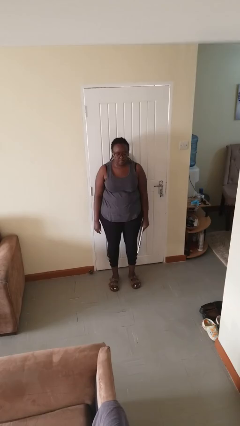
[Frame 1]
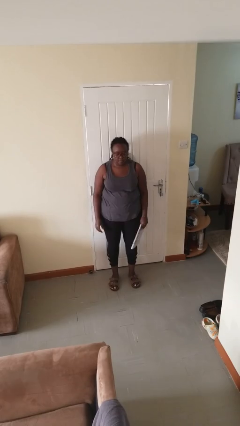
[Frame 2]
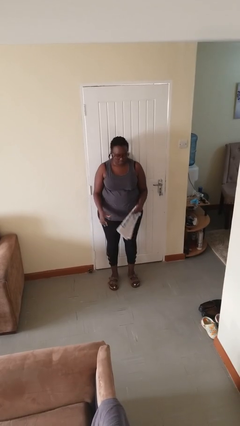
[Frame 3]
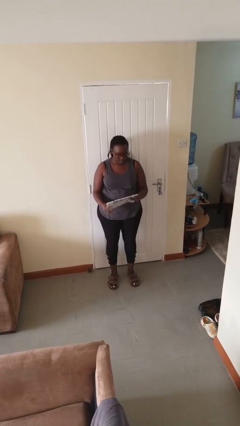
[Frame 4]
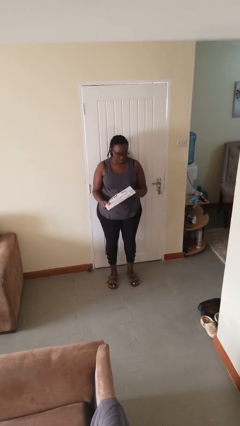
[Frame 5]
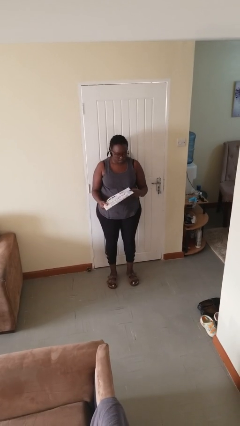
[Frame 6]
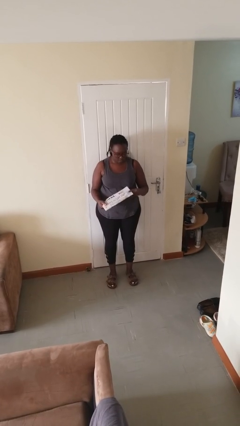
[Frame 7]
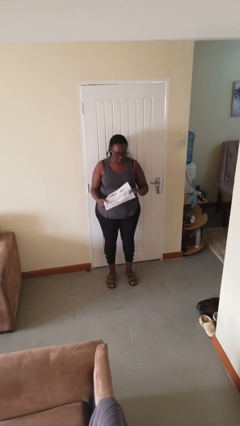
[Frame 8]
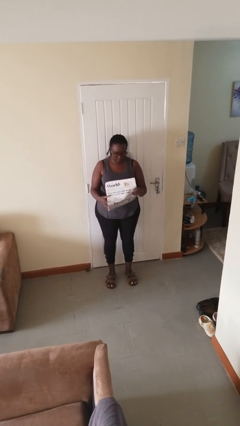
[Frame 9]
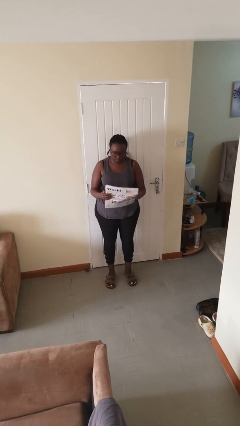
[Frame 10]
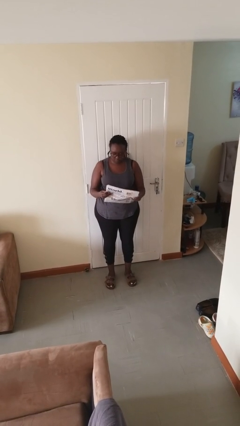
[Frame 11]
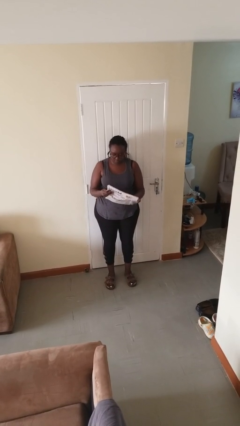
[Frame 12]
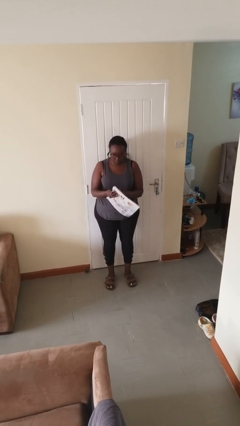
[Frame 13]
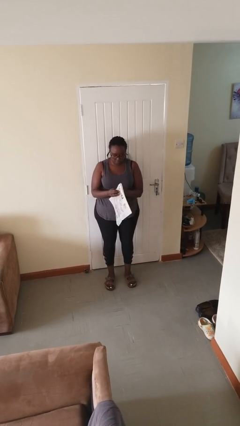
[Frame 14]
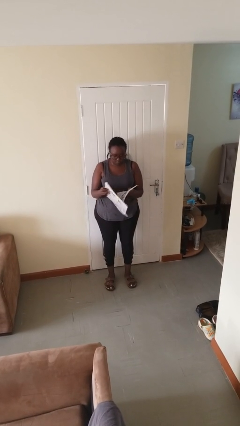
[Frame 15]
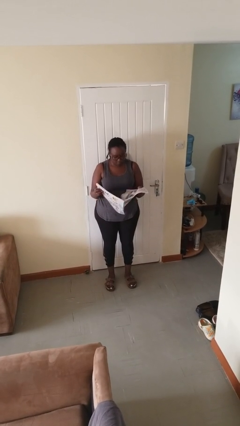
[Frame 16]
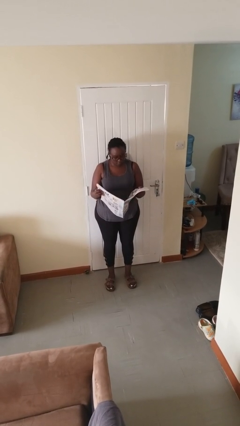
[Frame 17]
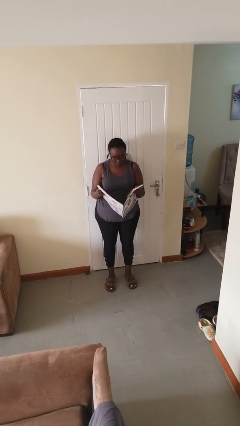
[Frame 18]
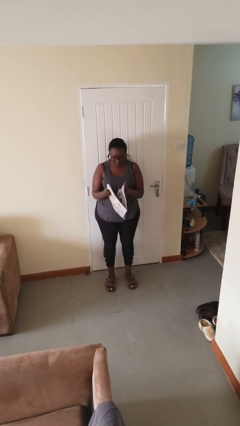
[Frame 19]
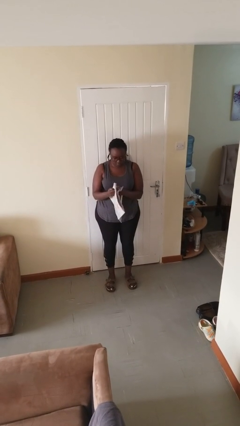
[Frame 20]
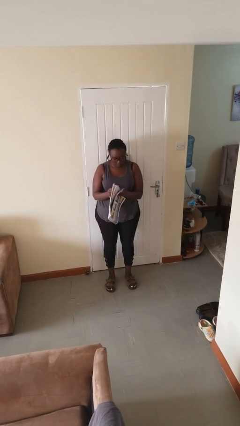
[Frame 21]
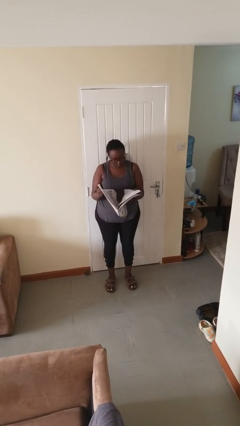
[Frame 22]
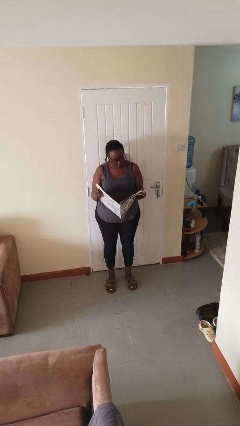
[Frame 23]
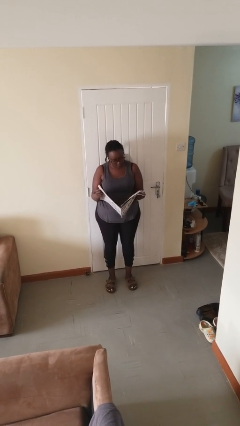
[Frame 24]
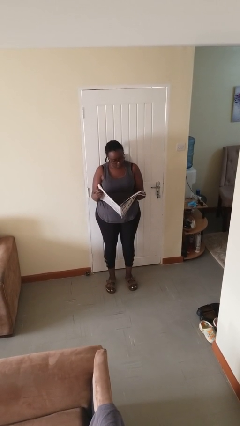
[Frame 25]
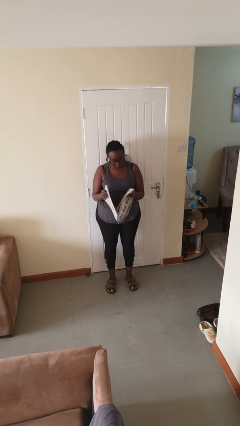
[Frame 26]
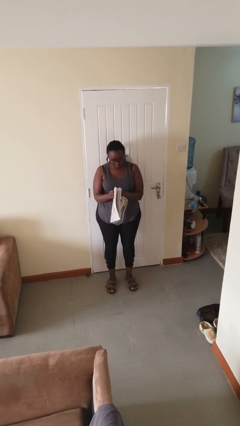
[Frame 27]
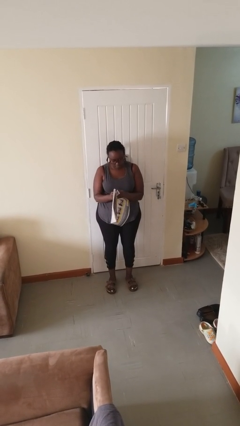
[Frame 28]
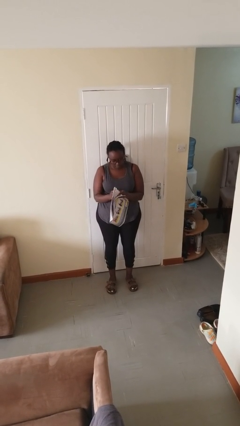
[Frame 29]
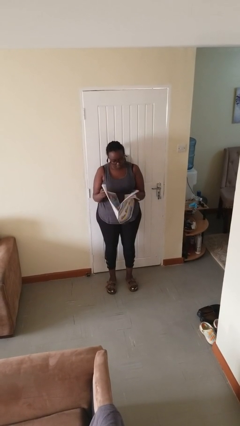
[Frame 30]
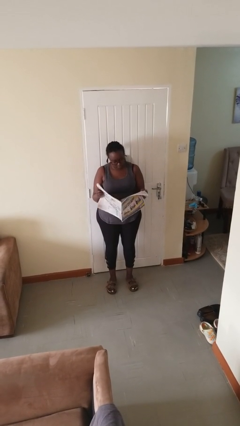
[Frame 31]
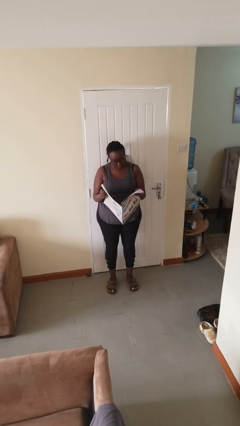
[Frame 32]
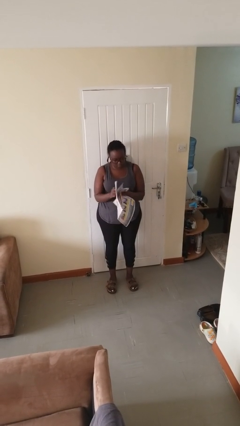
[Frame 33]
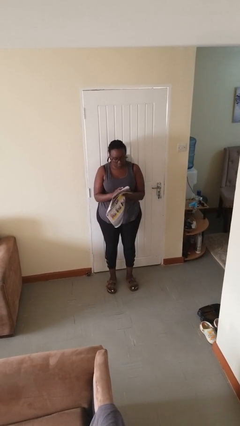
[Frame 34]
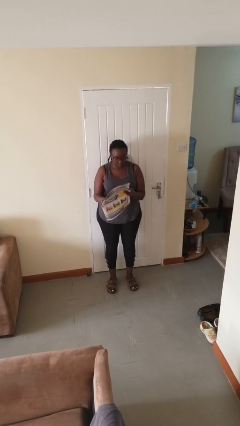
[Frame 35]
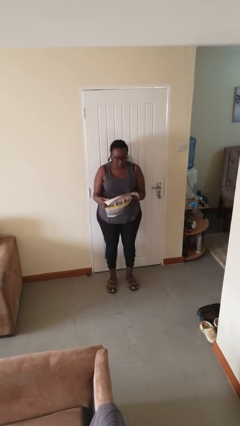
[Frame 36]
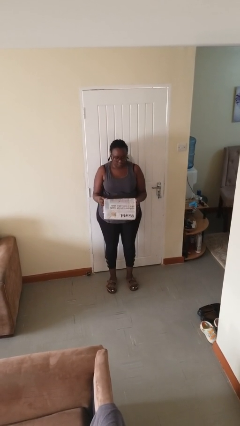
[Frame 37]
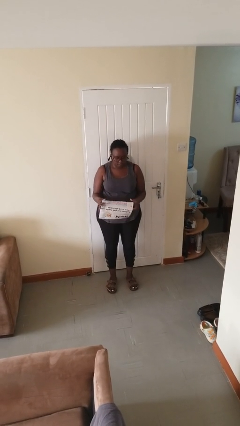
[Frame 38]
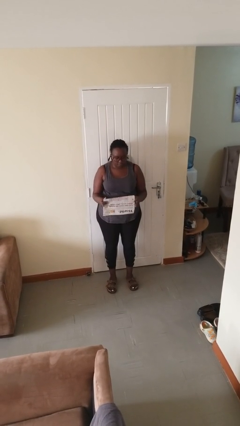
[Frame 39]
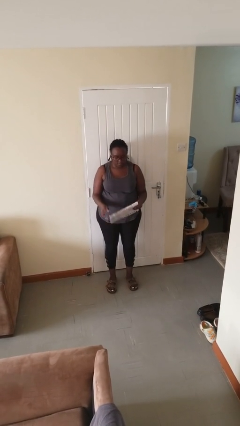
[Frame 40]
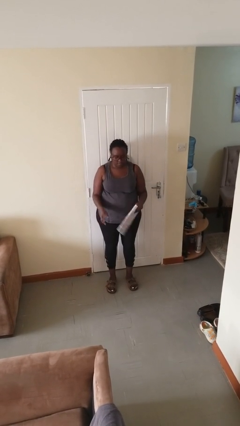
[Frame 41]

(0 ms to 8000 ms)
person reads newspaper

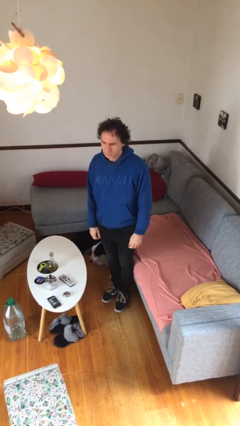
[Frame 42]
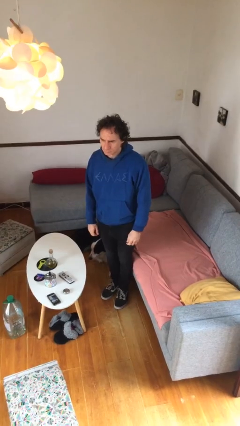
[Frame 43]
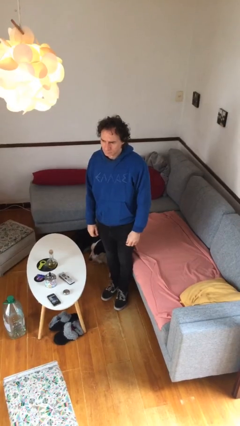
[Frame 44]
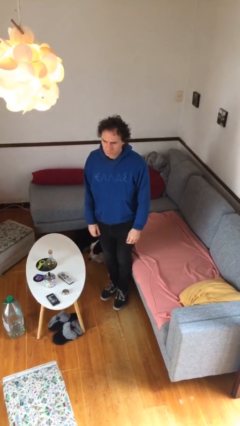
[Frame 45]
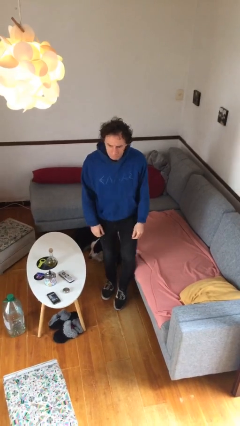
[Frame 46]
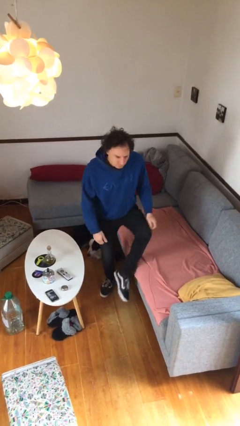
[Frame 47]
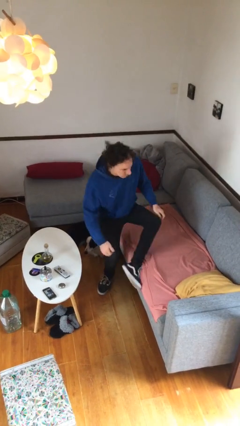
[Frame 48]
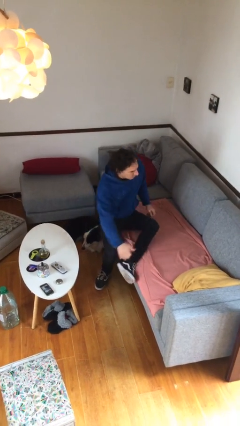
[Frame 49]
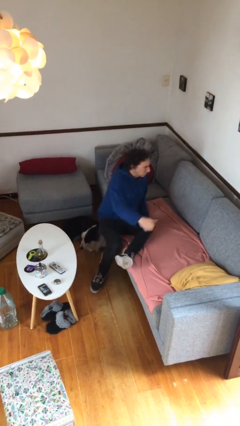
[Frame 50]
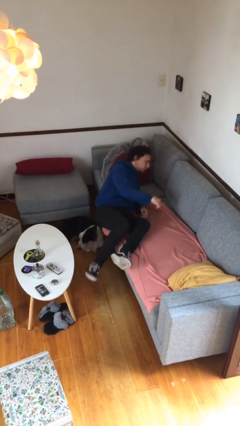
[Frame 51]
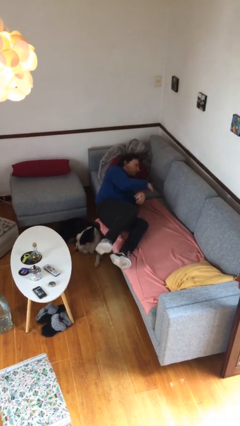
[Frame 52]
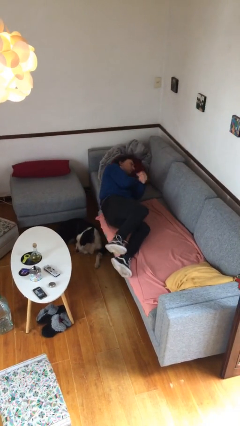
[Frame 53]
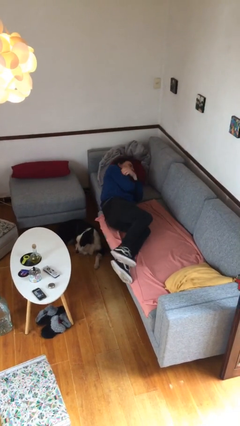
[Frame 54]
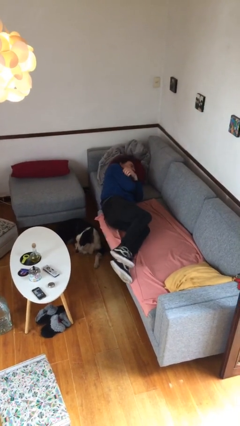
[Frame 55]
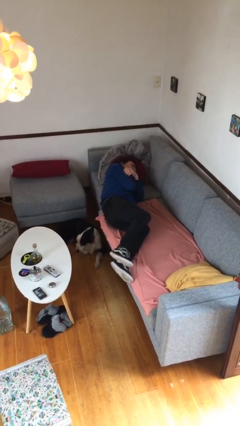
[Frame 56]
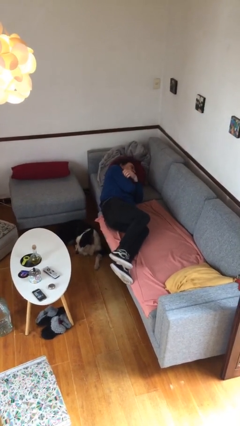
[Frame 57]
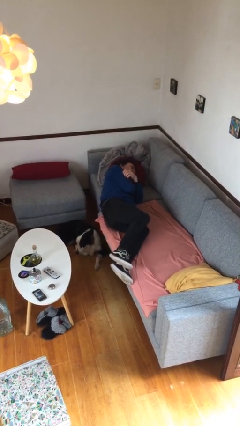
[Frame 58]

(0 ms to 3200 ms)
person lies down on couch

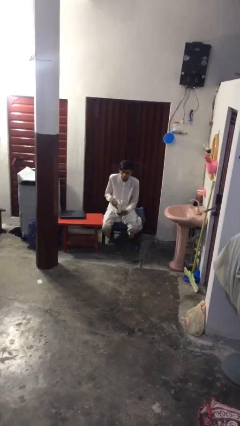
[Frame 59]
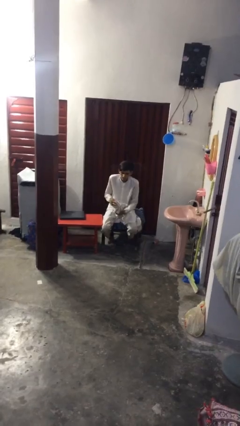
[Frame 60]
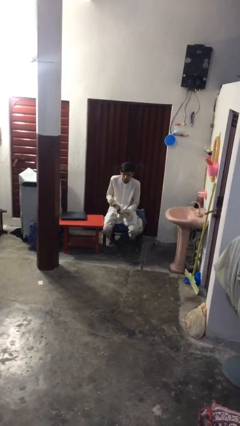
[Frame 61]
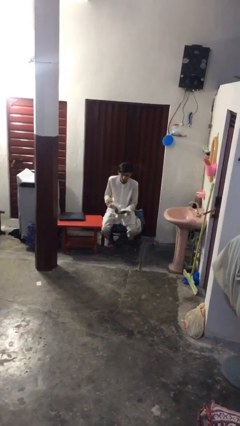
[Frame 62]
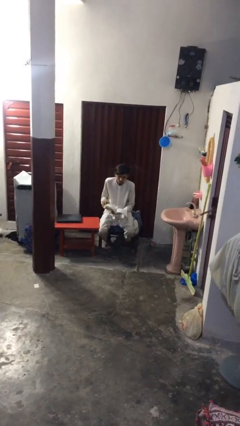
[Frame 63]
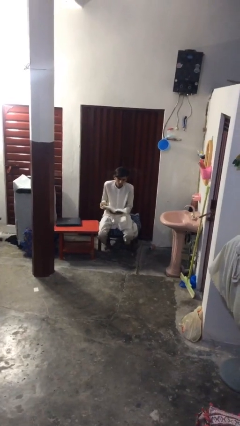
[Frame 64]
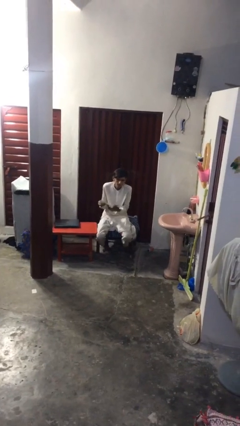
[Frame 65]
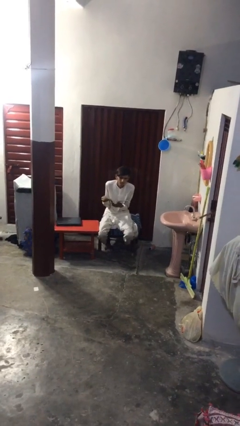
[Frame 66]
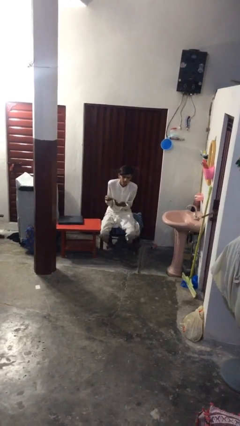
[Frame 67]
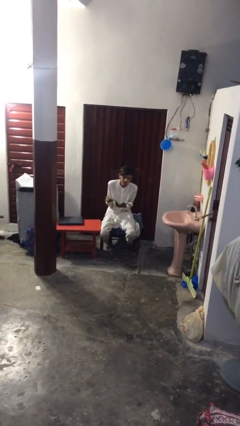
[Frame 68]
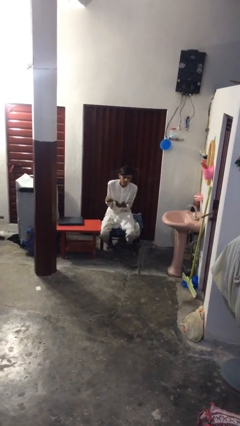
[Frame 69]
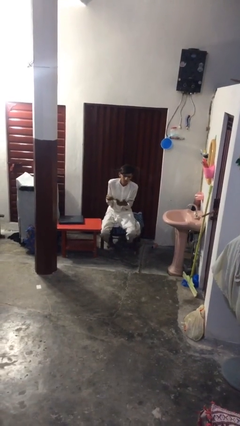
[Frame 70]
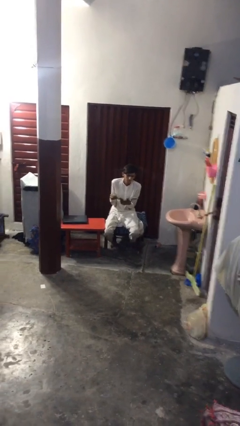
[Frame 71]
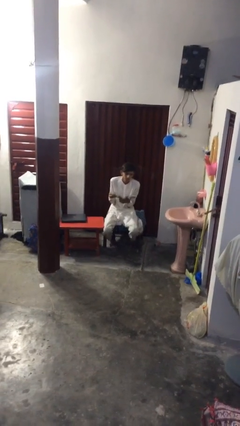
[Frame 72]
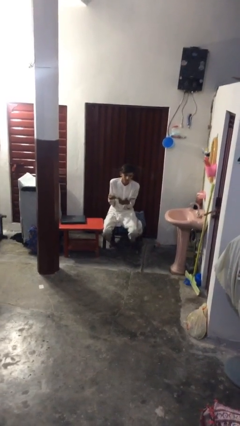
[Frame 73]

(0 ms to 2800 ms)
person reads document

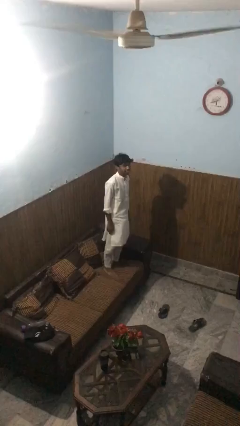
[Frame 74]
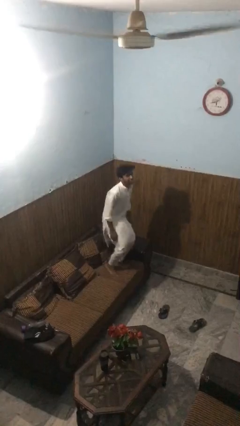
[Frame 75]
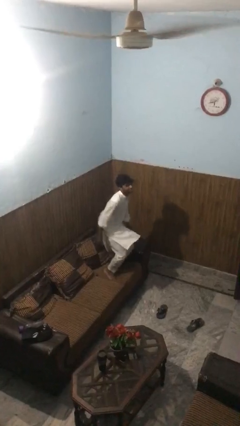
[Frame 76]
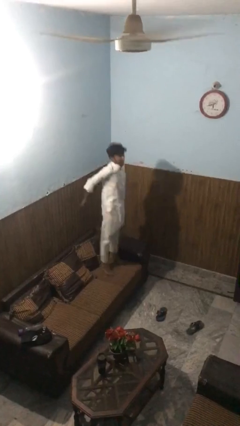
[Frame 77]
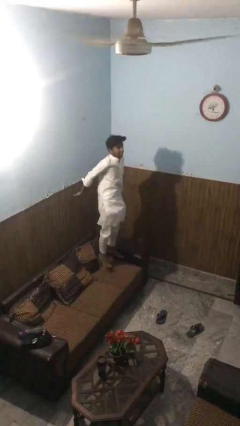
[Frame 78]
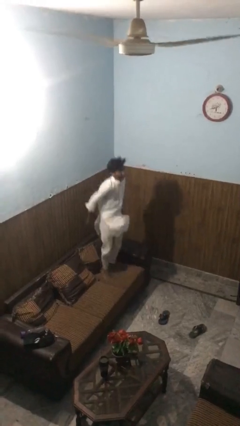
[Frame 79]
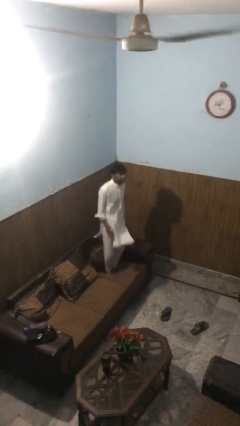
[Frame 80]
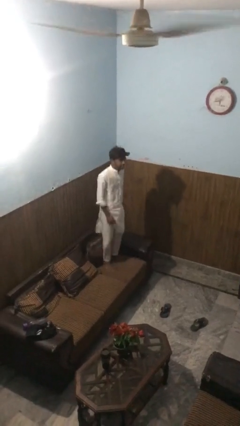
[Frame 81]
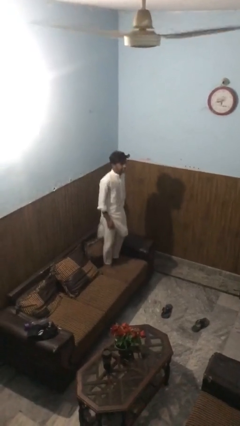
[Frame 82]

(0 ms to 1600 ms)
person jumps on couch

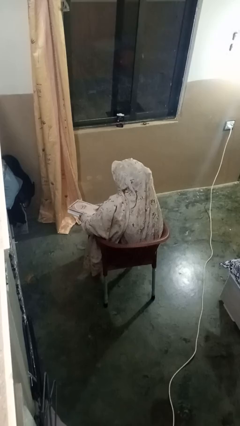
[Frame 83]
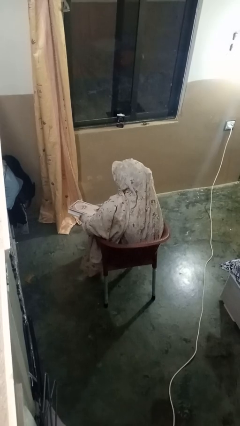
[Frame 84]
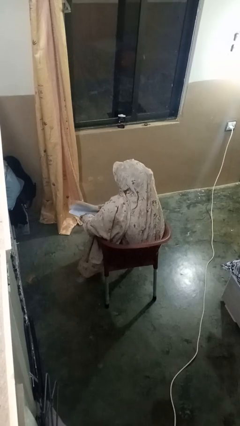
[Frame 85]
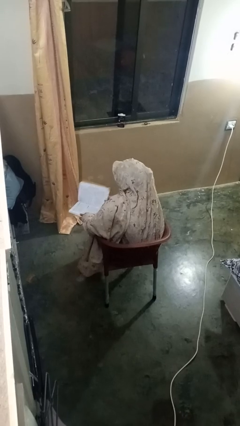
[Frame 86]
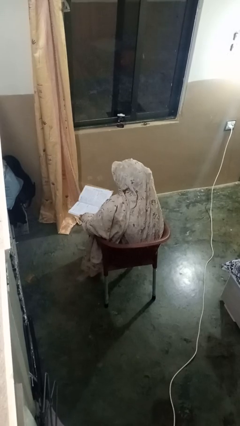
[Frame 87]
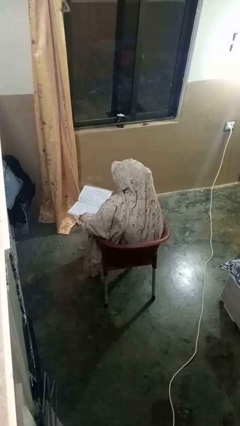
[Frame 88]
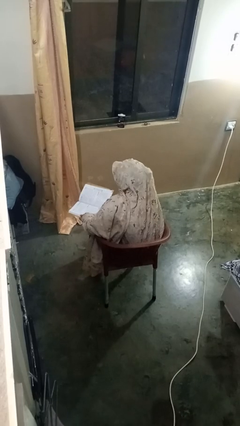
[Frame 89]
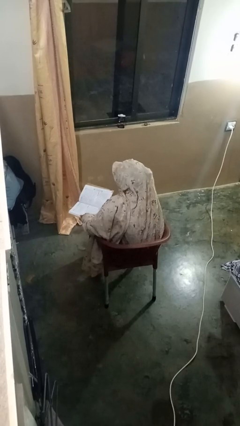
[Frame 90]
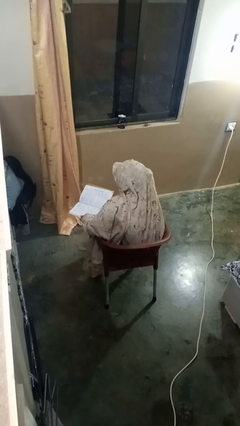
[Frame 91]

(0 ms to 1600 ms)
person reads book
